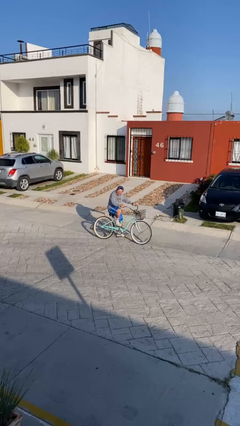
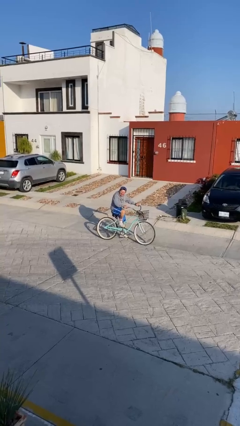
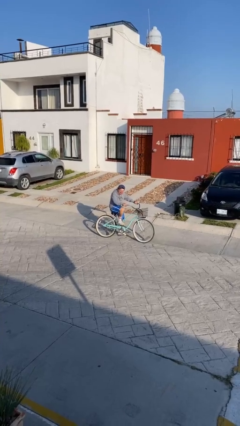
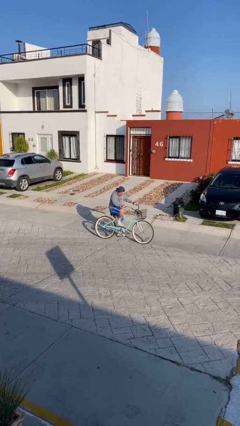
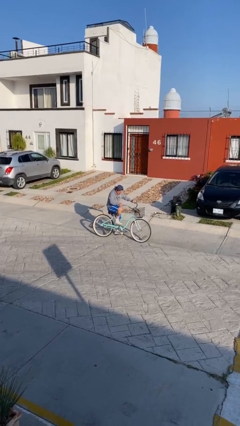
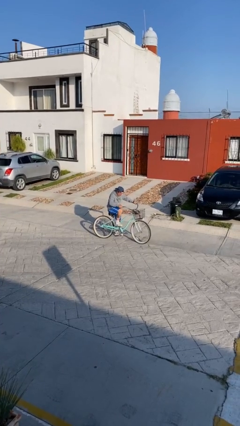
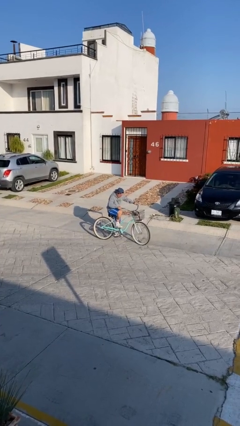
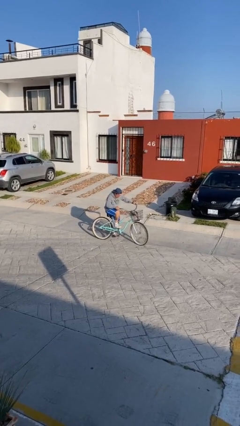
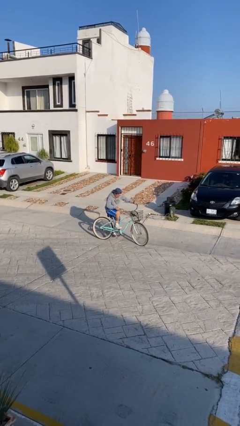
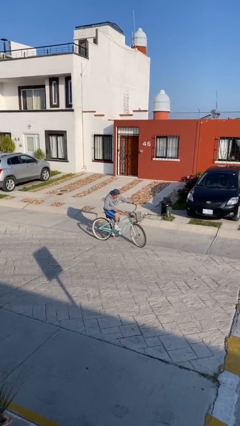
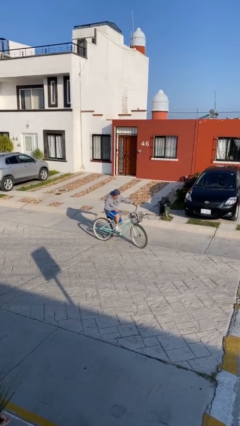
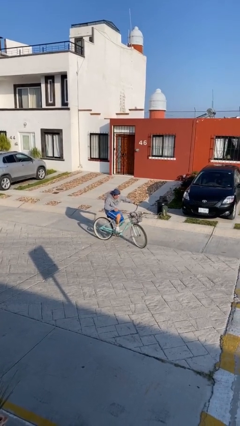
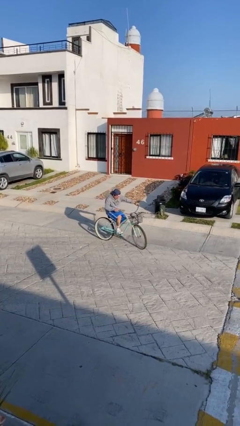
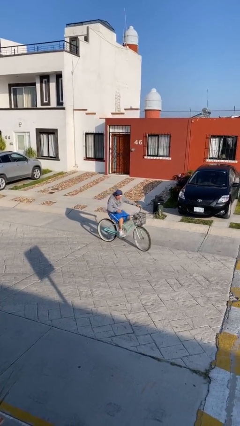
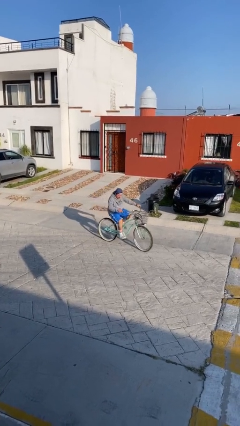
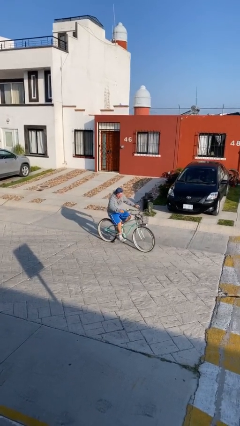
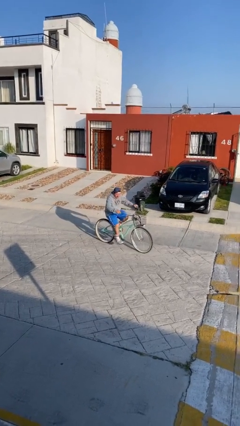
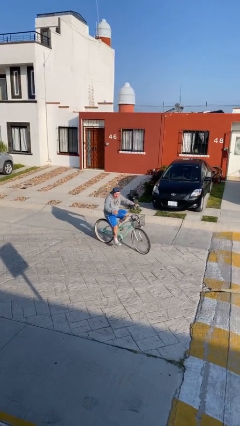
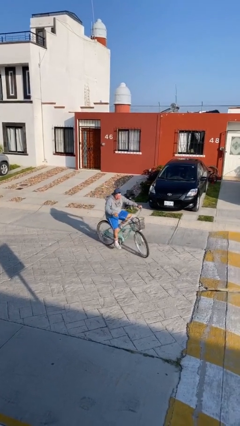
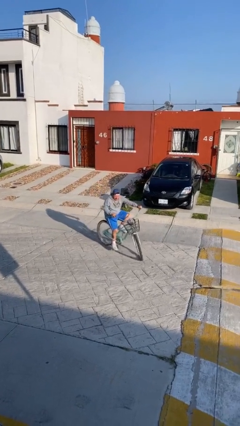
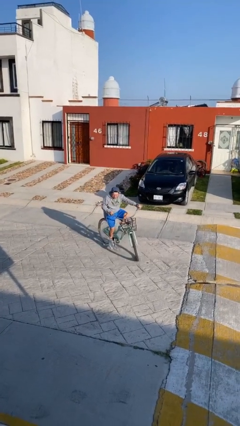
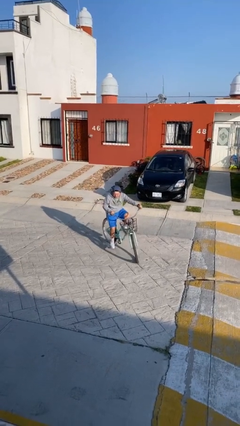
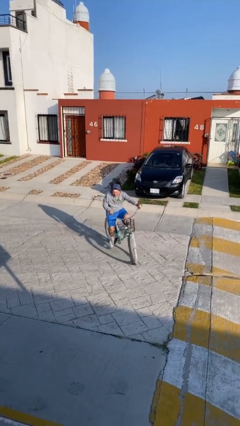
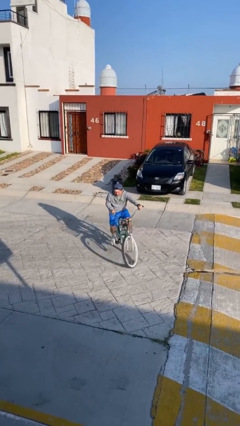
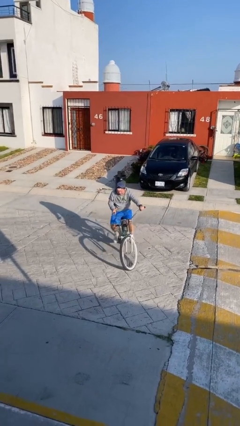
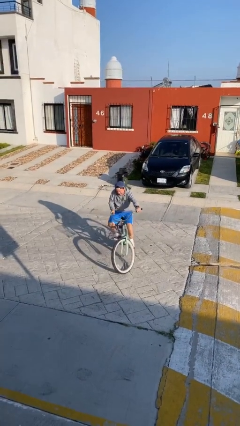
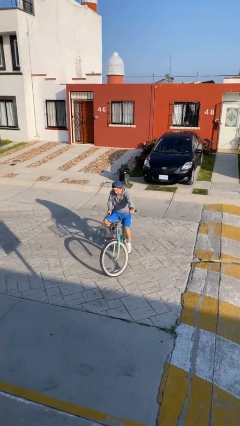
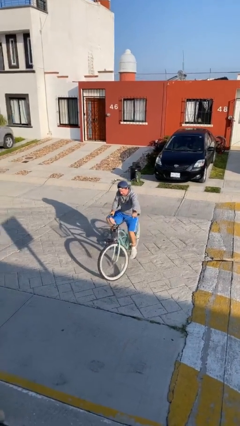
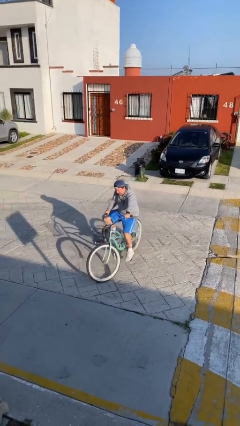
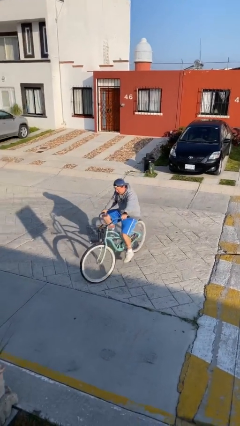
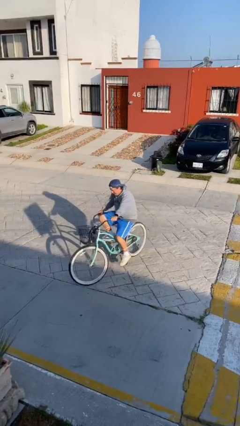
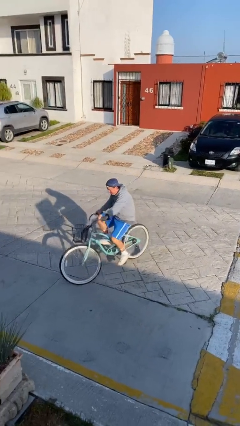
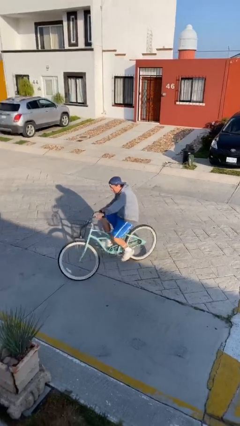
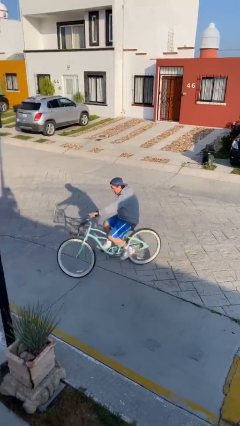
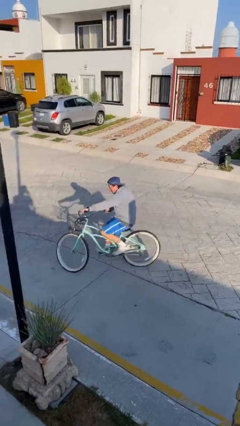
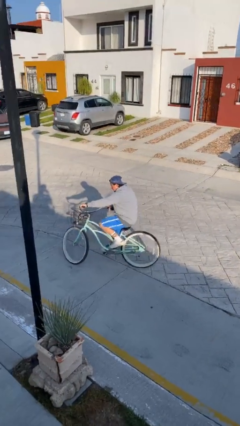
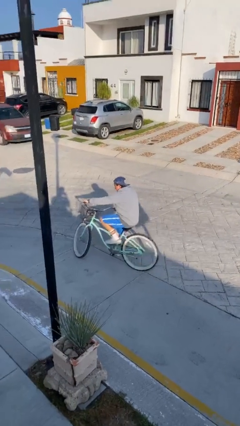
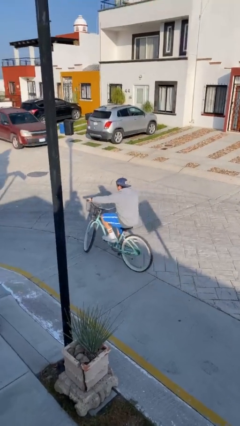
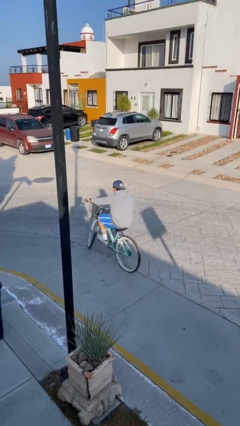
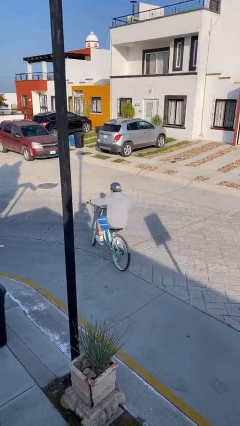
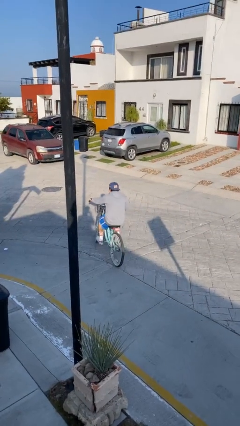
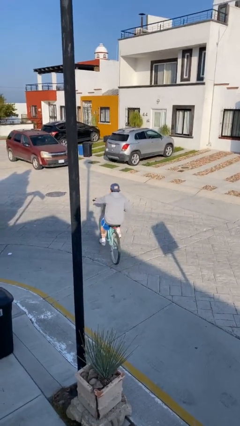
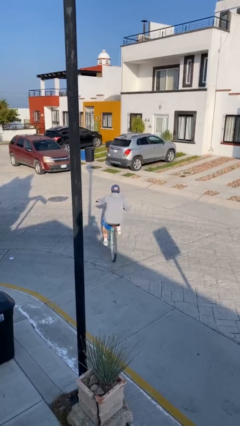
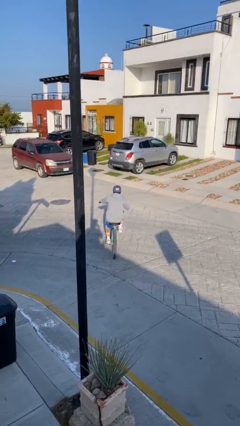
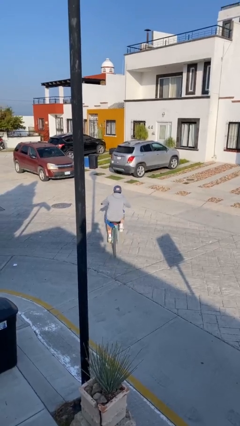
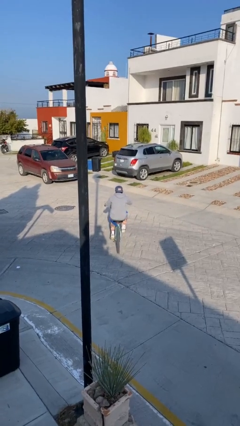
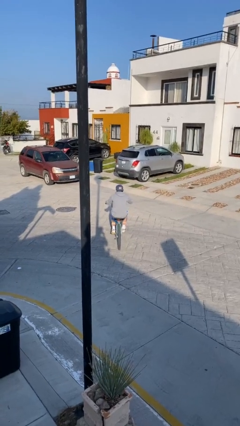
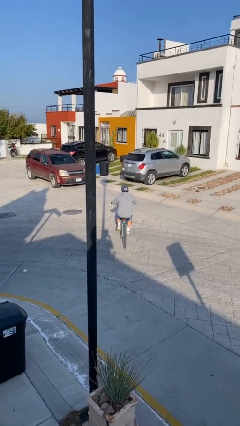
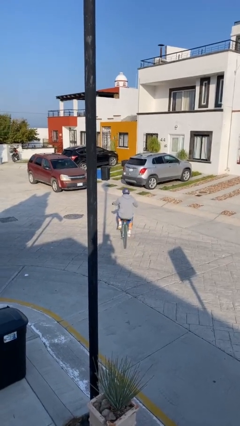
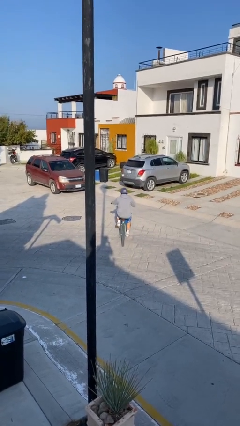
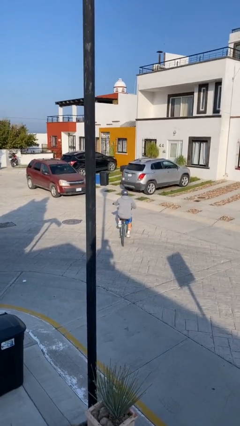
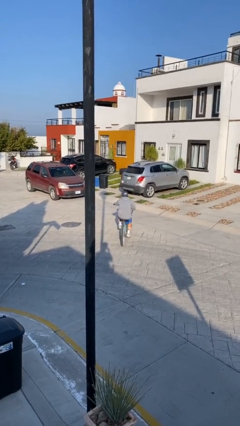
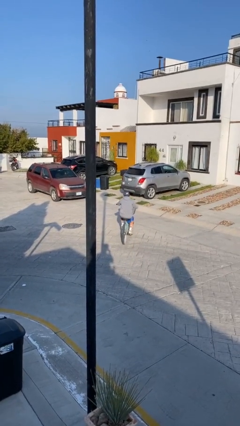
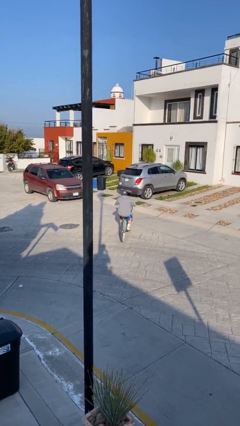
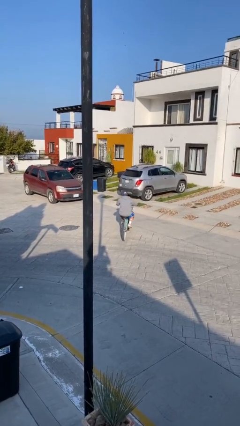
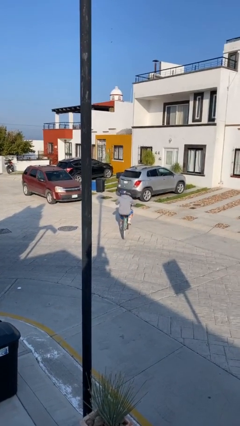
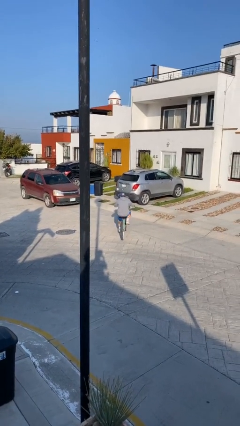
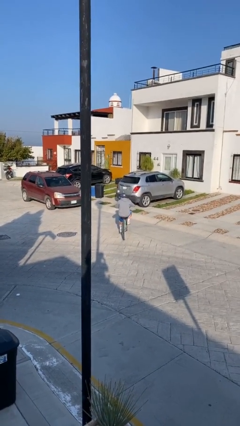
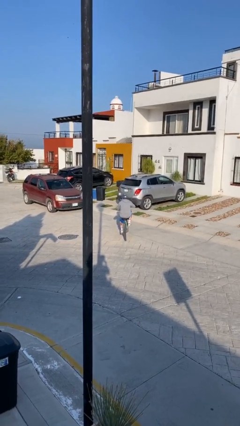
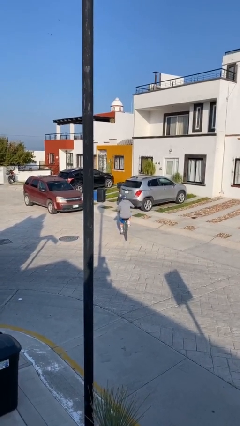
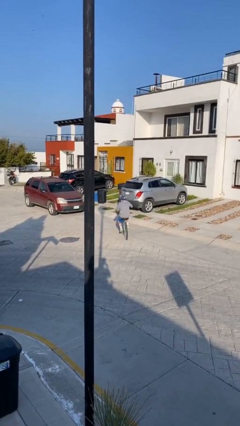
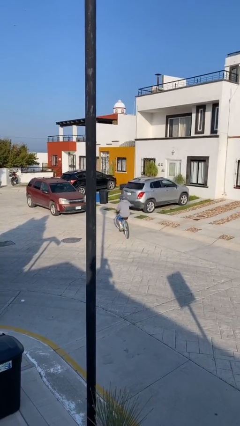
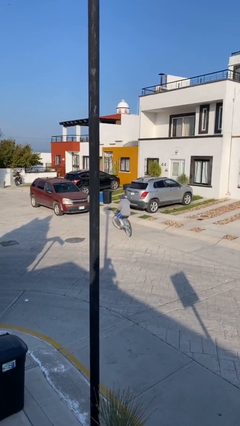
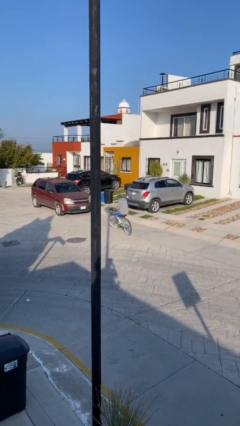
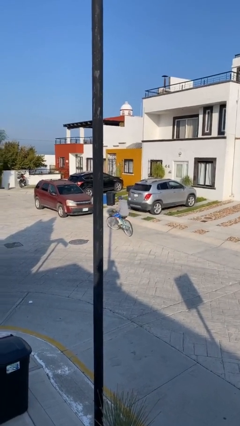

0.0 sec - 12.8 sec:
person rides bicycle

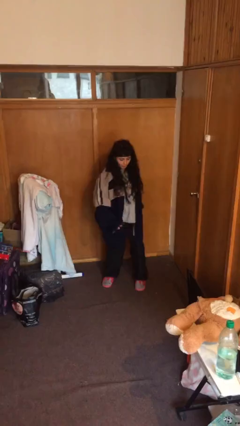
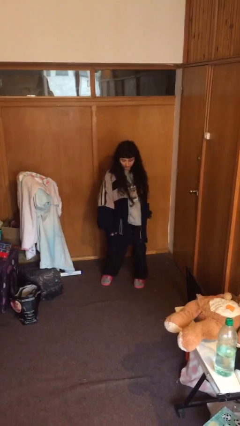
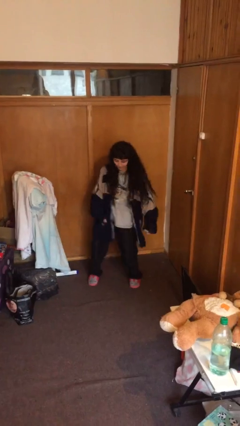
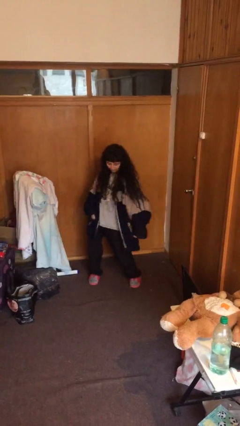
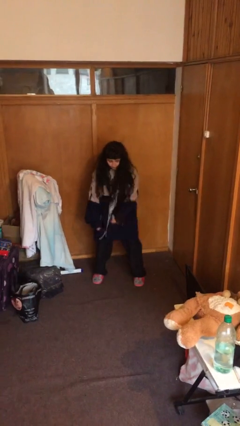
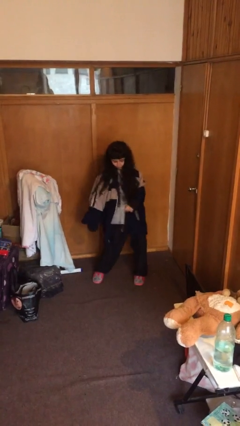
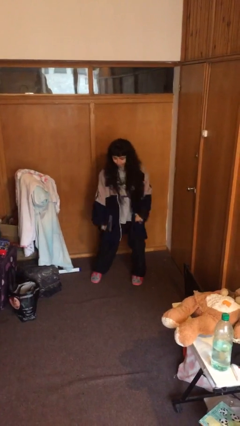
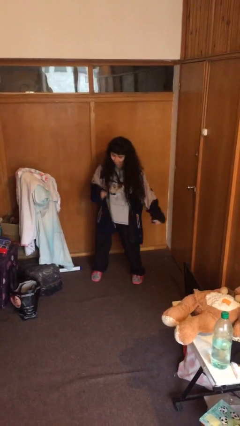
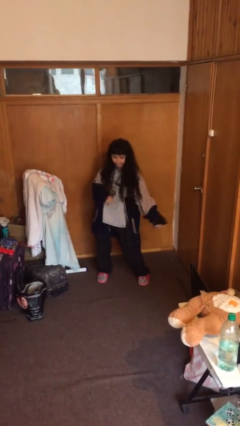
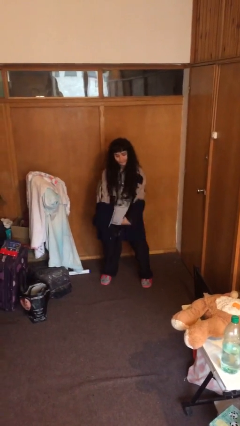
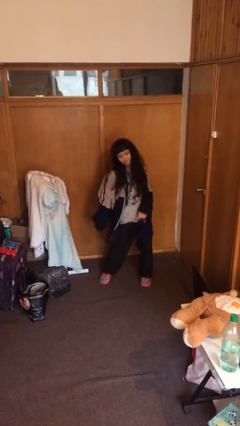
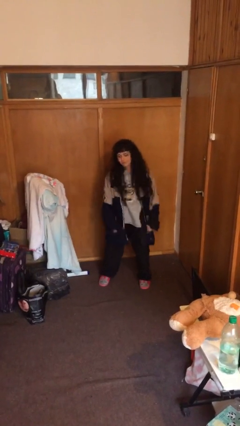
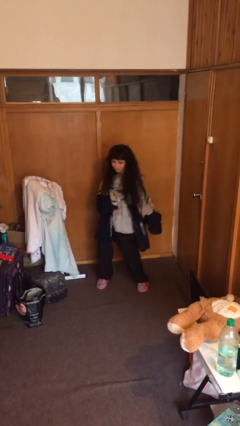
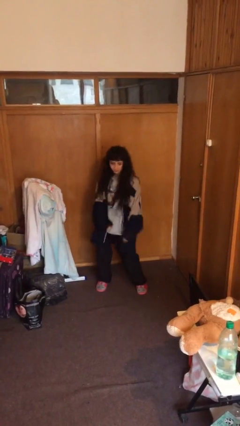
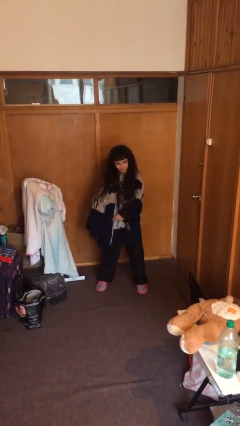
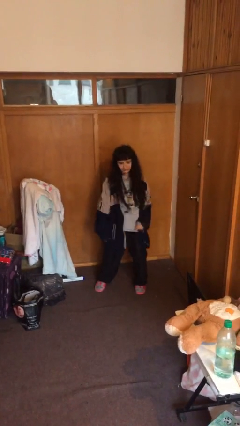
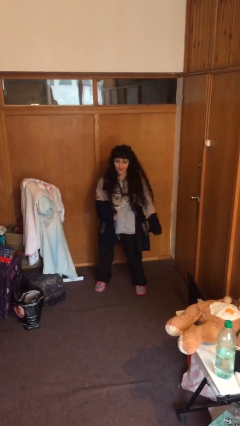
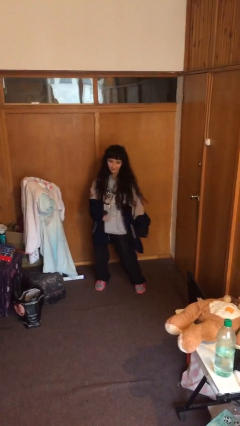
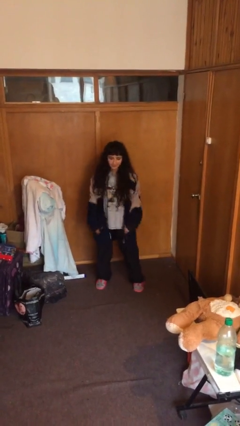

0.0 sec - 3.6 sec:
person dances in place

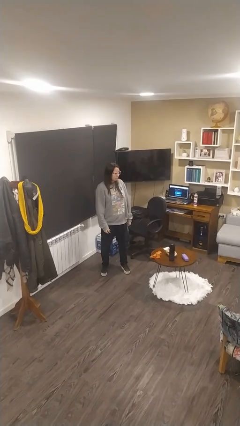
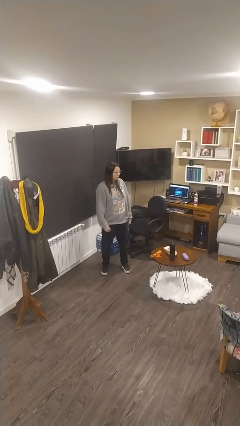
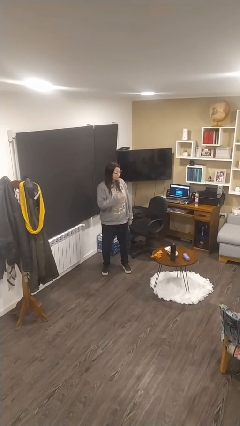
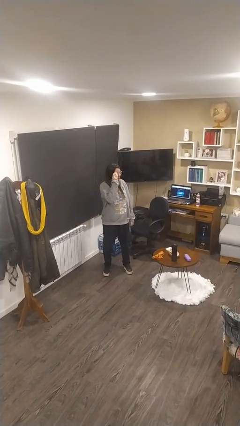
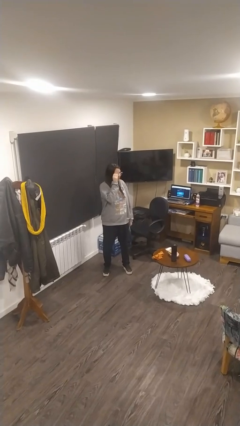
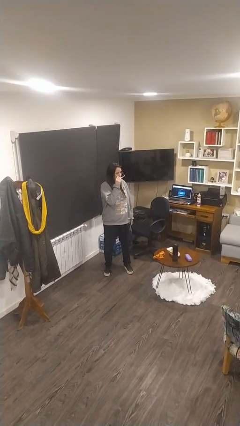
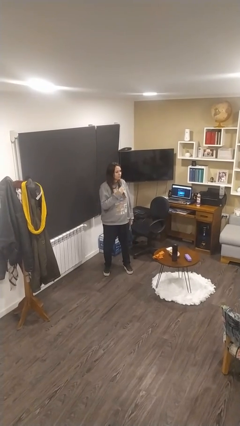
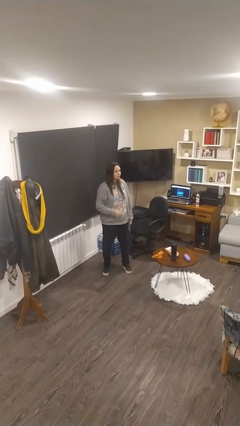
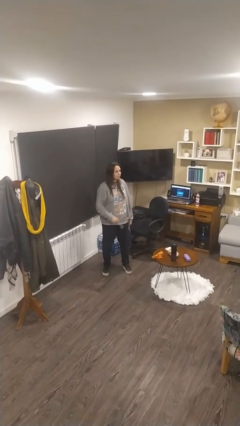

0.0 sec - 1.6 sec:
person takes off glasses
